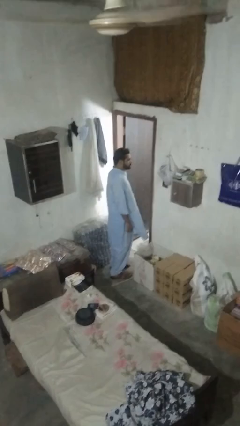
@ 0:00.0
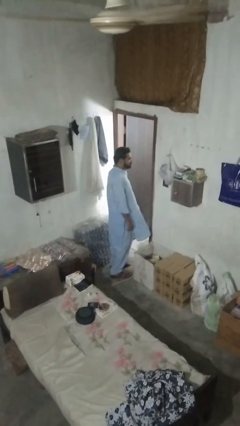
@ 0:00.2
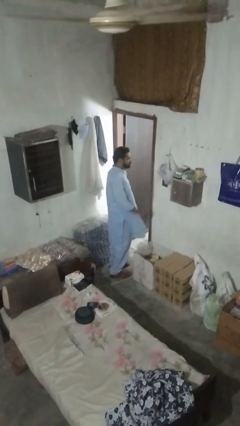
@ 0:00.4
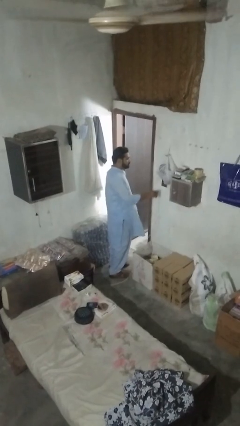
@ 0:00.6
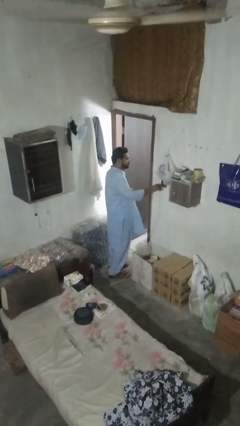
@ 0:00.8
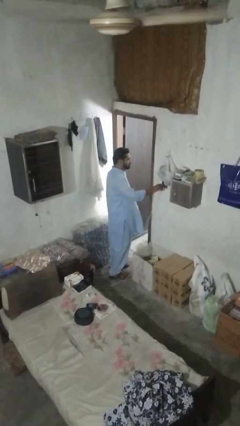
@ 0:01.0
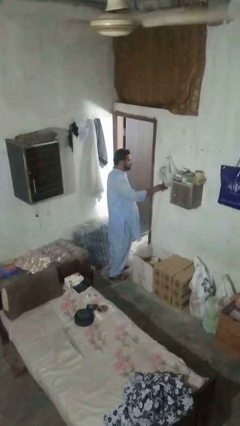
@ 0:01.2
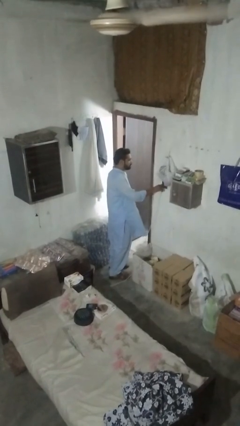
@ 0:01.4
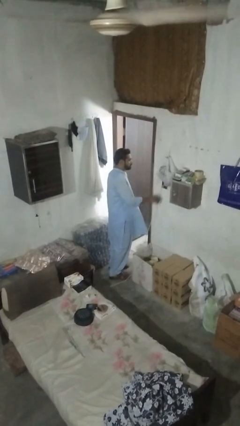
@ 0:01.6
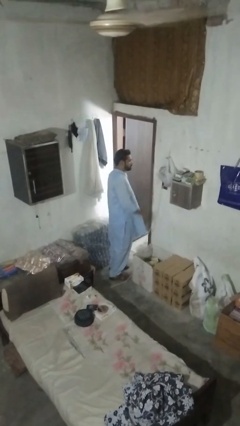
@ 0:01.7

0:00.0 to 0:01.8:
person plugs into electrical socket

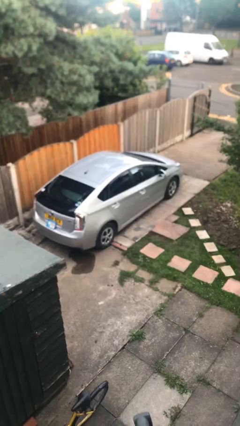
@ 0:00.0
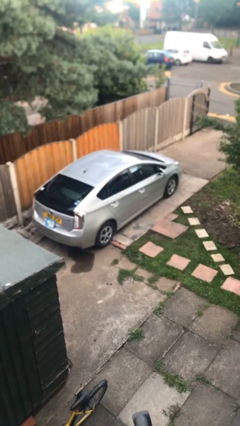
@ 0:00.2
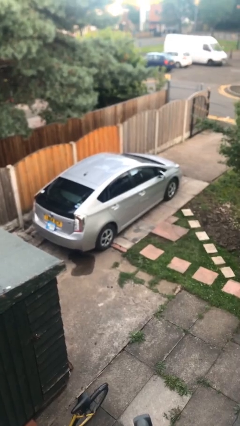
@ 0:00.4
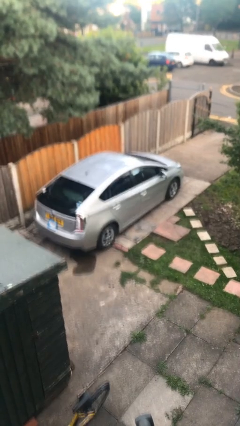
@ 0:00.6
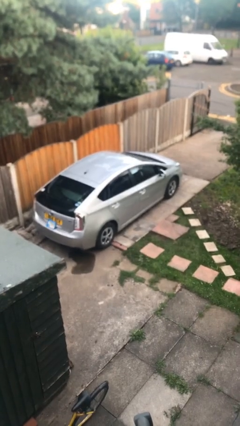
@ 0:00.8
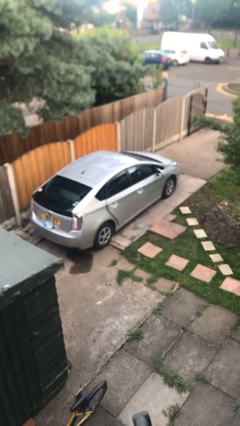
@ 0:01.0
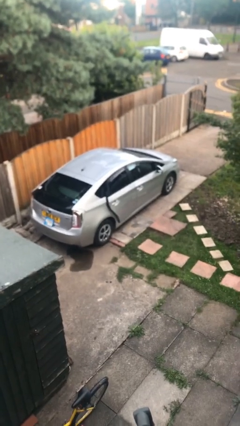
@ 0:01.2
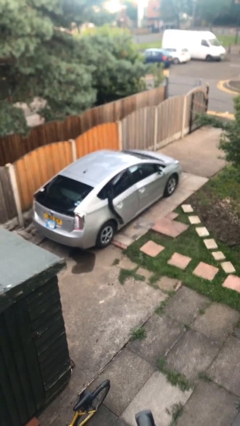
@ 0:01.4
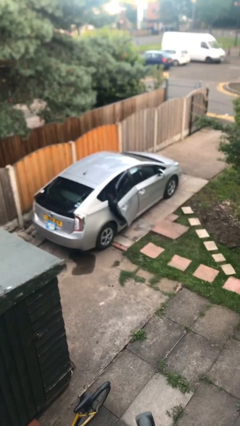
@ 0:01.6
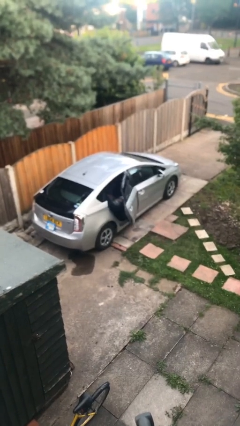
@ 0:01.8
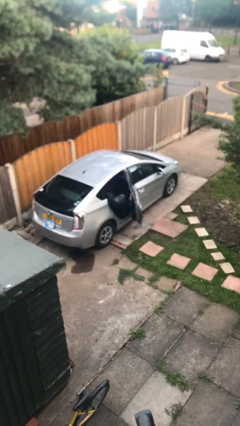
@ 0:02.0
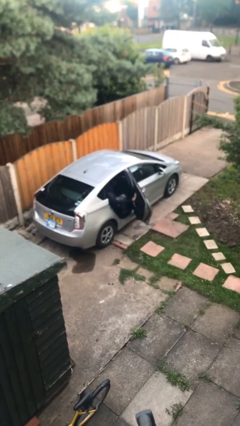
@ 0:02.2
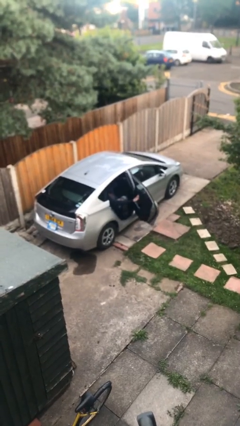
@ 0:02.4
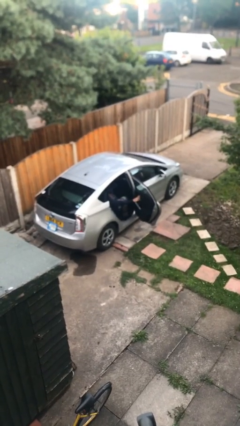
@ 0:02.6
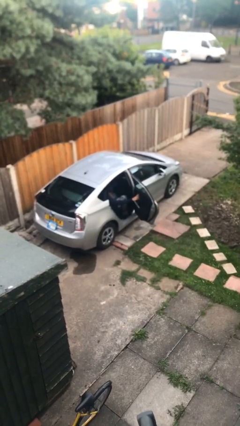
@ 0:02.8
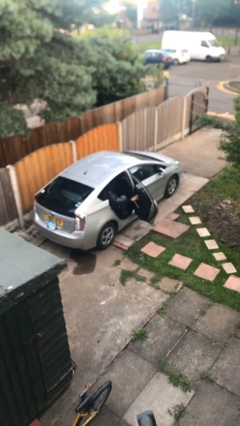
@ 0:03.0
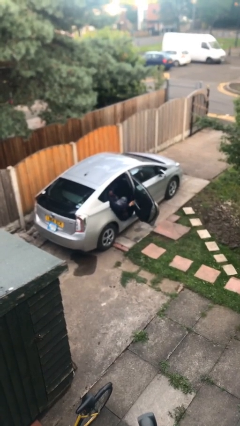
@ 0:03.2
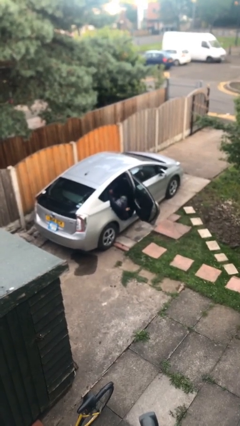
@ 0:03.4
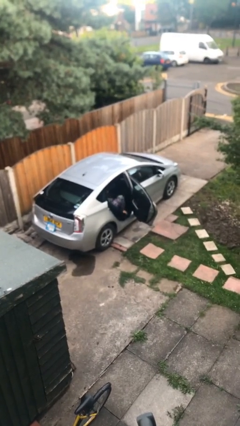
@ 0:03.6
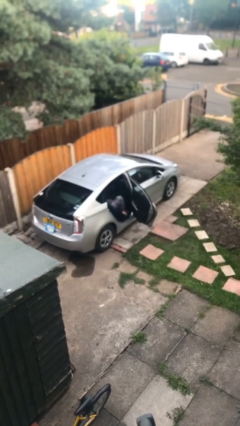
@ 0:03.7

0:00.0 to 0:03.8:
person opens car door

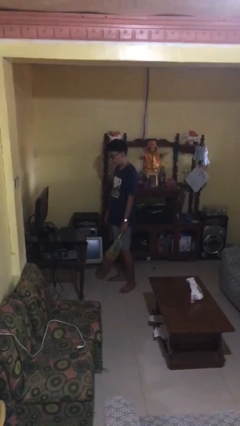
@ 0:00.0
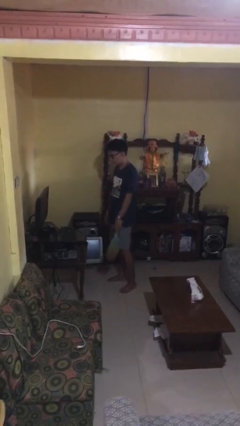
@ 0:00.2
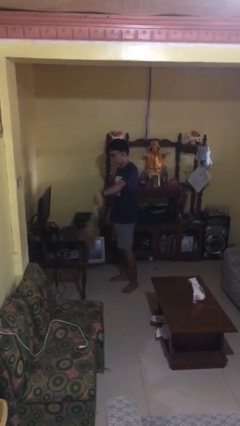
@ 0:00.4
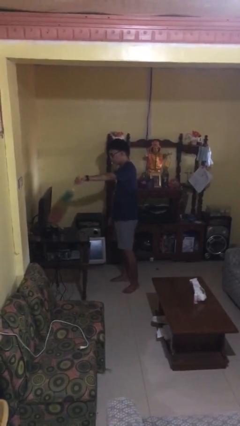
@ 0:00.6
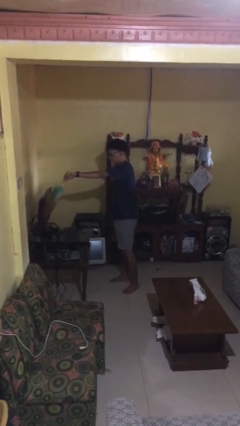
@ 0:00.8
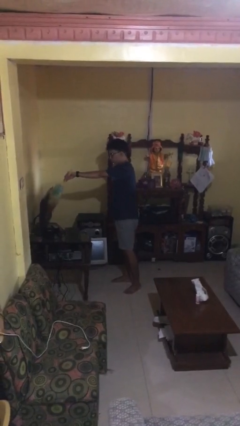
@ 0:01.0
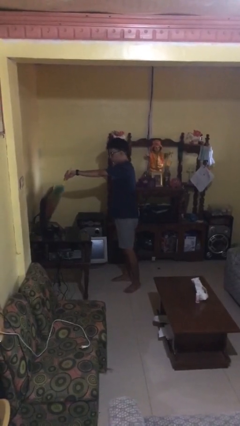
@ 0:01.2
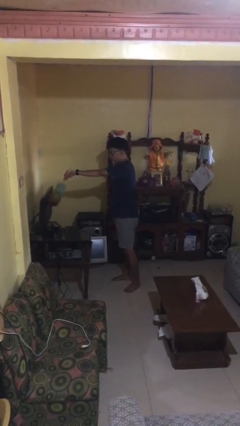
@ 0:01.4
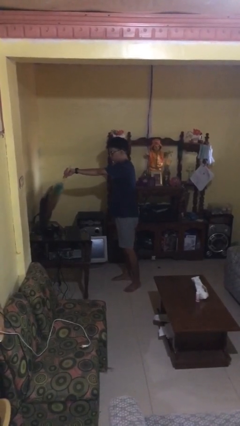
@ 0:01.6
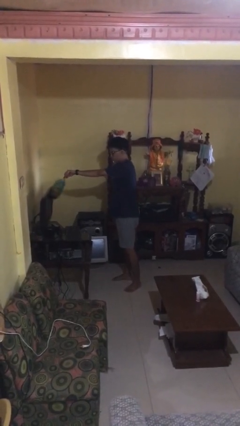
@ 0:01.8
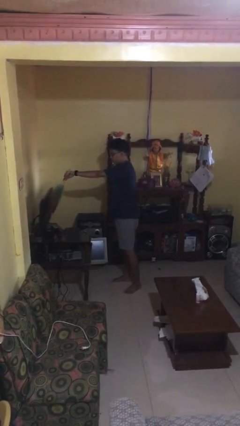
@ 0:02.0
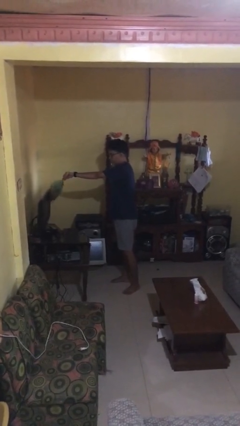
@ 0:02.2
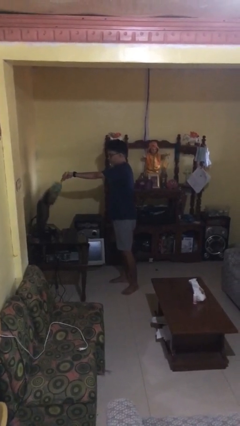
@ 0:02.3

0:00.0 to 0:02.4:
person dusts furniture

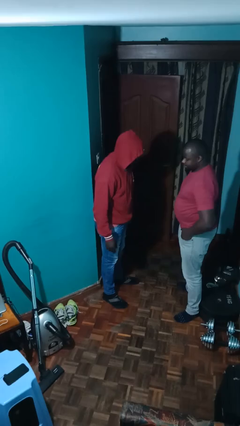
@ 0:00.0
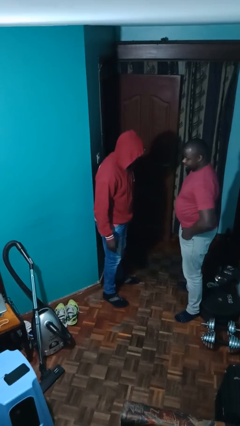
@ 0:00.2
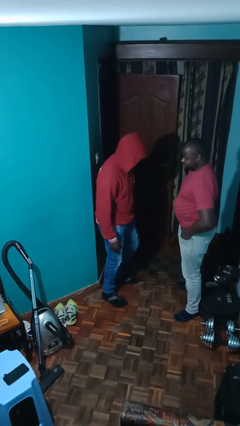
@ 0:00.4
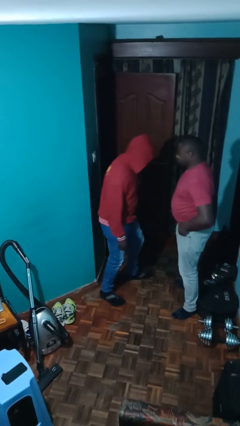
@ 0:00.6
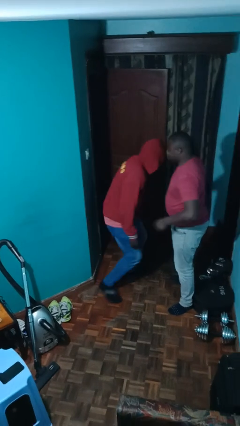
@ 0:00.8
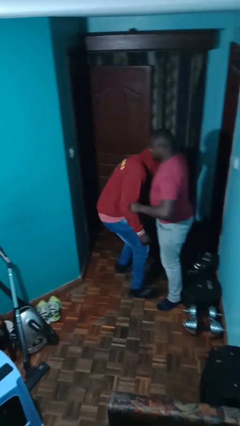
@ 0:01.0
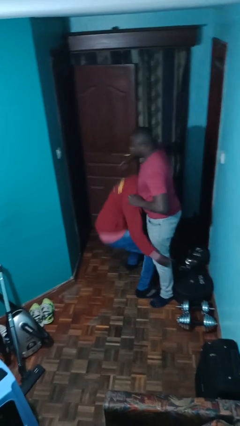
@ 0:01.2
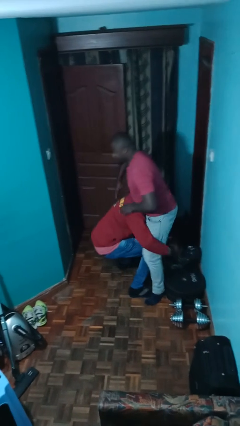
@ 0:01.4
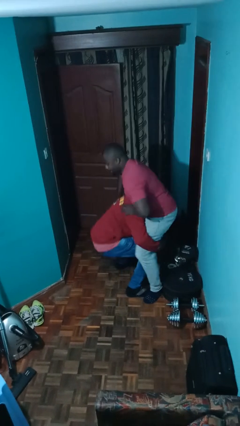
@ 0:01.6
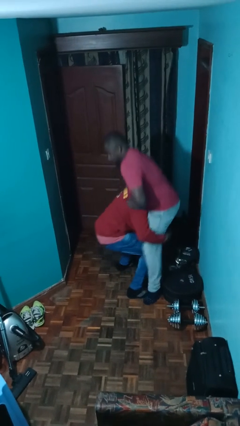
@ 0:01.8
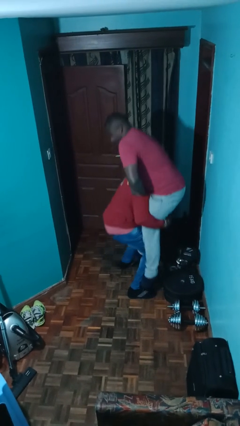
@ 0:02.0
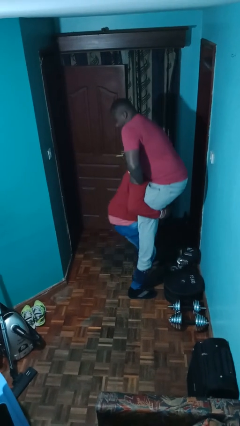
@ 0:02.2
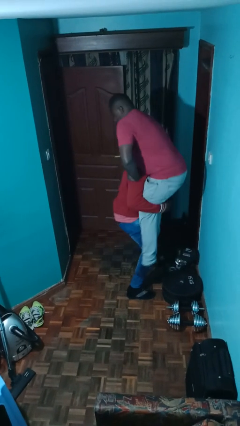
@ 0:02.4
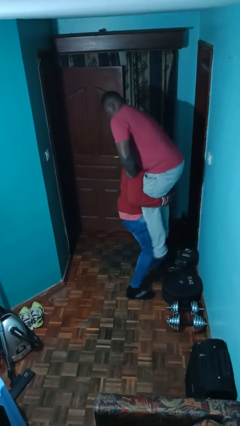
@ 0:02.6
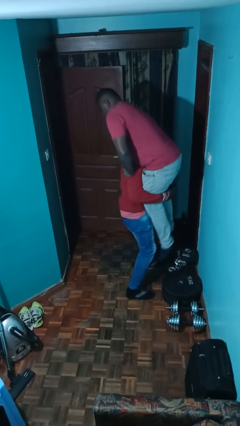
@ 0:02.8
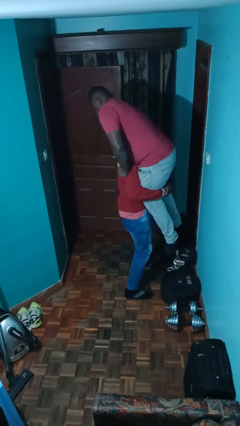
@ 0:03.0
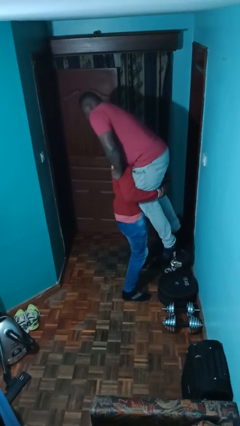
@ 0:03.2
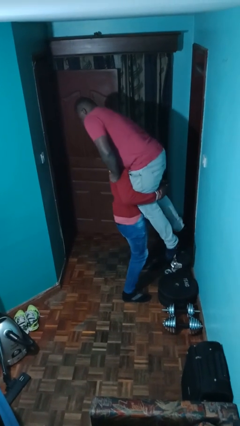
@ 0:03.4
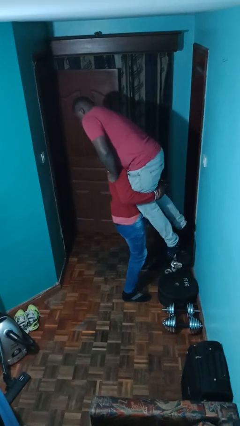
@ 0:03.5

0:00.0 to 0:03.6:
person picks up person

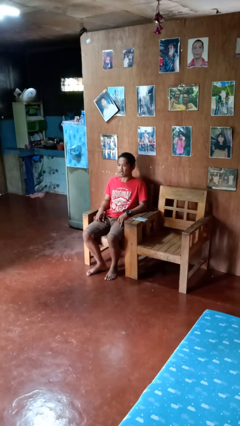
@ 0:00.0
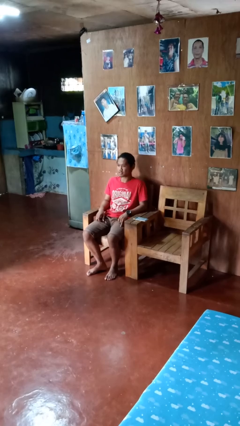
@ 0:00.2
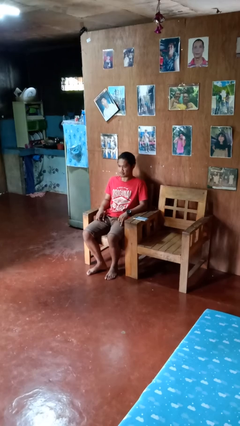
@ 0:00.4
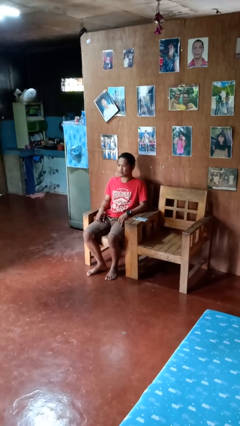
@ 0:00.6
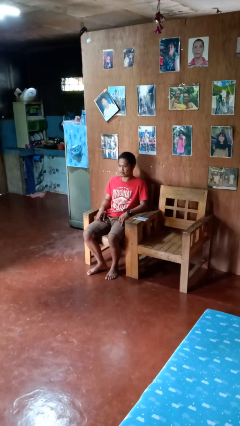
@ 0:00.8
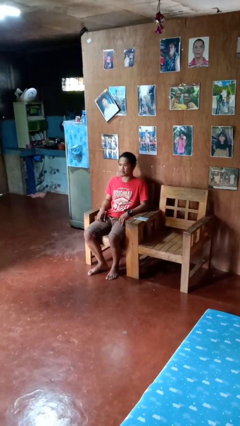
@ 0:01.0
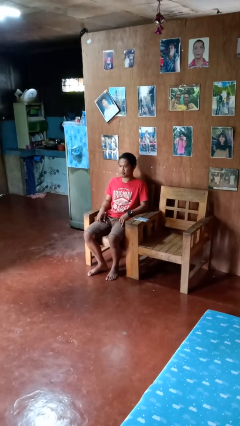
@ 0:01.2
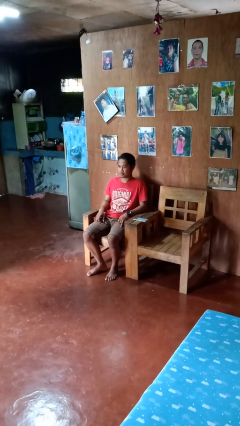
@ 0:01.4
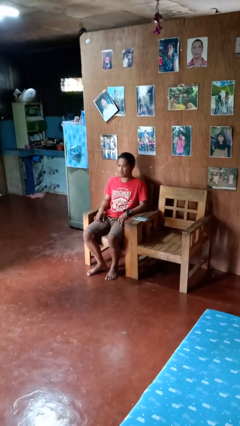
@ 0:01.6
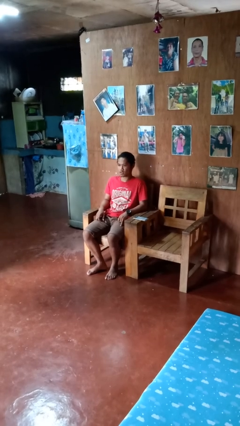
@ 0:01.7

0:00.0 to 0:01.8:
person nods head

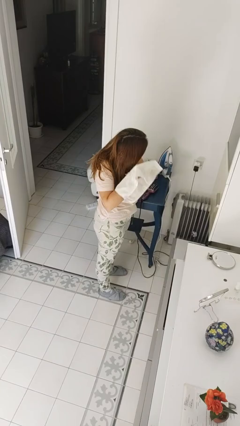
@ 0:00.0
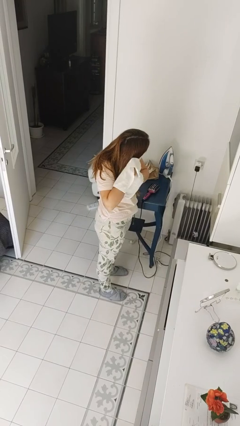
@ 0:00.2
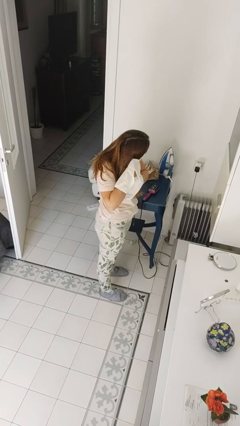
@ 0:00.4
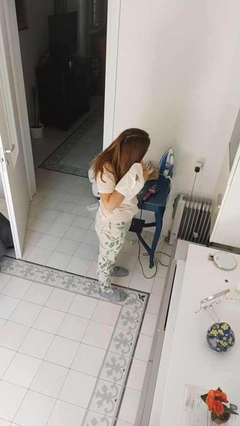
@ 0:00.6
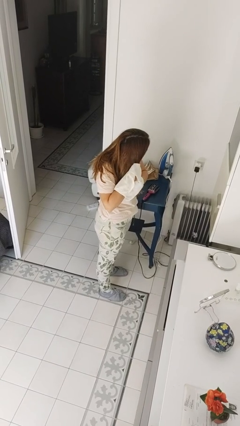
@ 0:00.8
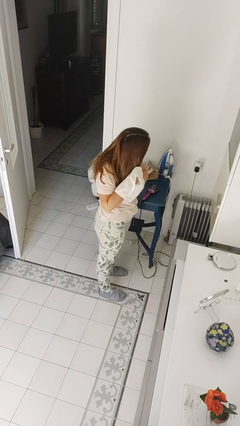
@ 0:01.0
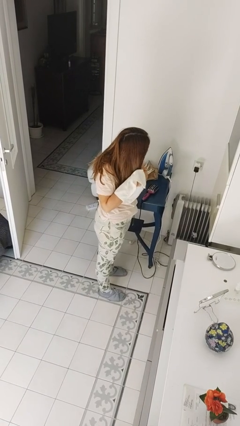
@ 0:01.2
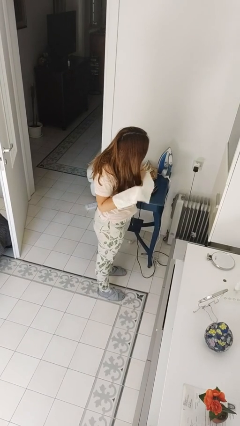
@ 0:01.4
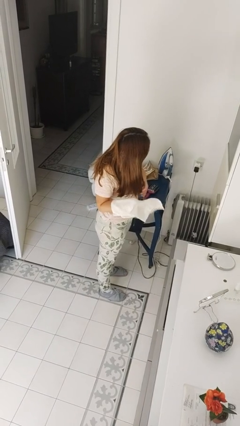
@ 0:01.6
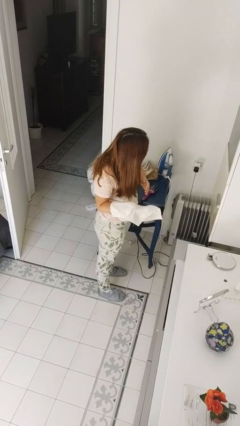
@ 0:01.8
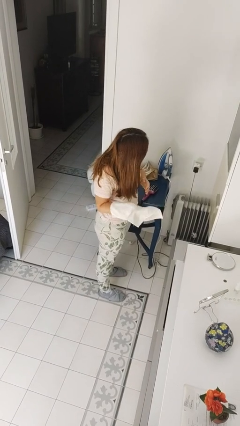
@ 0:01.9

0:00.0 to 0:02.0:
person dries hair with towel
